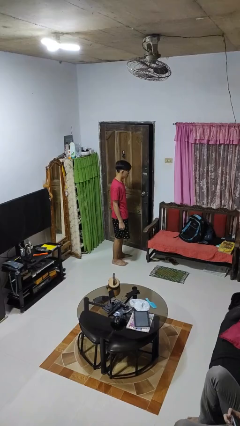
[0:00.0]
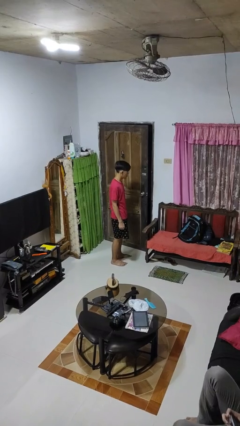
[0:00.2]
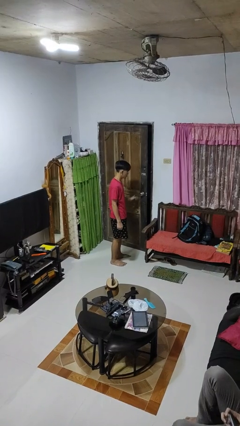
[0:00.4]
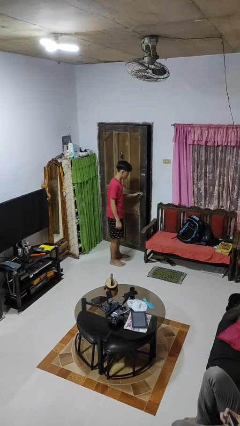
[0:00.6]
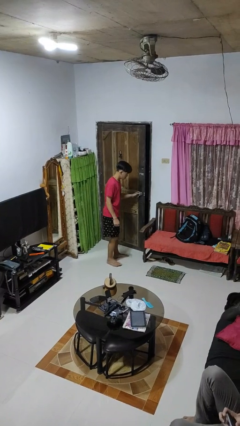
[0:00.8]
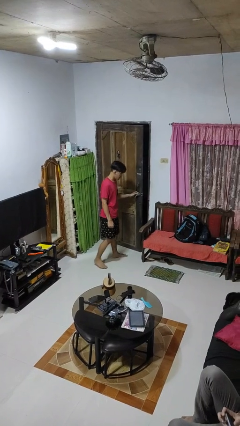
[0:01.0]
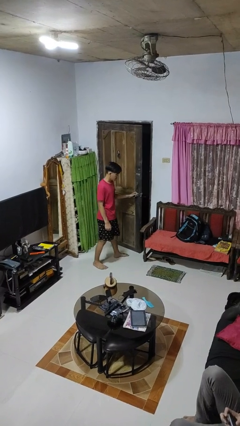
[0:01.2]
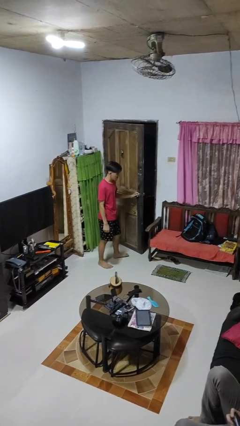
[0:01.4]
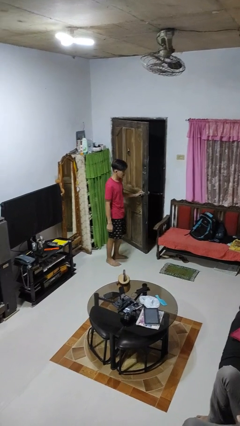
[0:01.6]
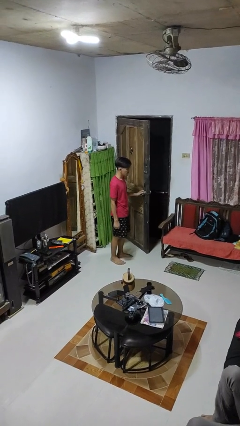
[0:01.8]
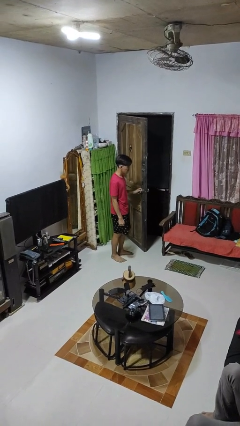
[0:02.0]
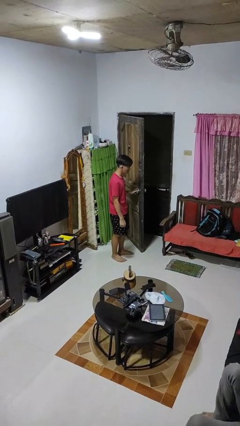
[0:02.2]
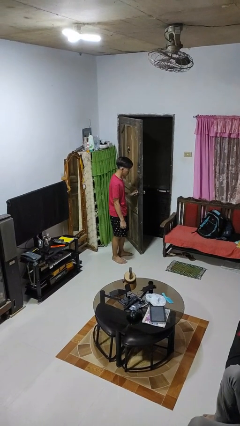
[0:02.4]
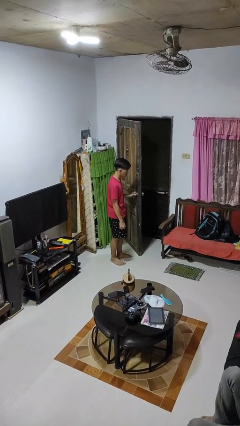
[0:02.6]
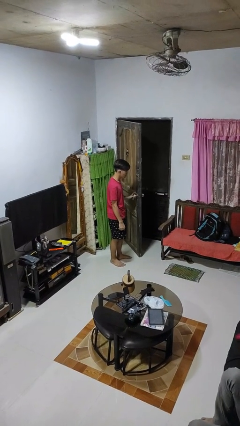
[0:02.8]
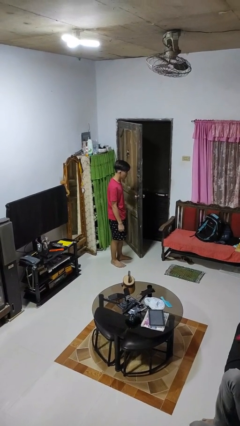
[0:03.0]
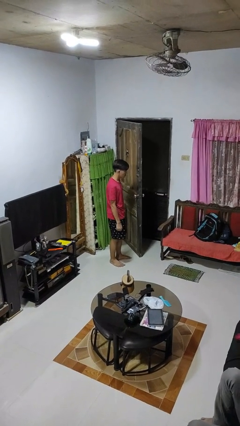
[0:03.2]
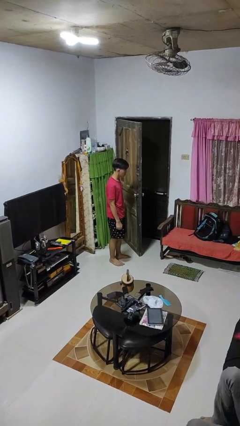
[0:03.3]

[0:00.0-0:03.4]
person opens facility door

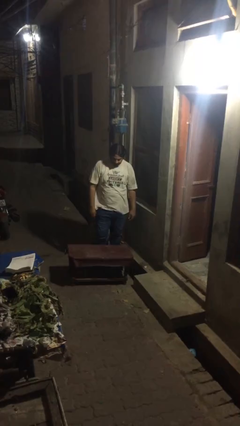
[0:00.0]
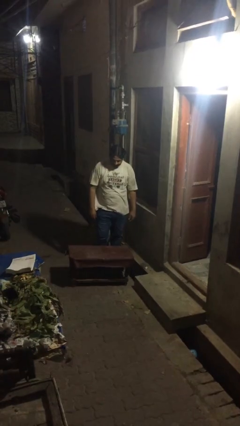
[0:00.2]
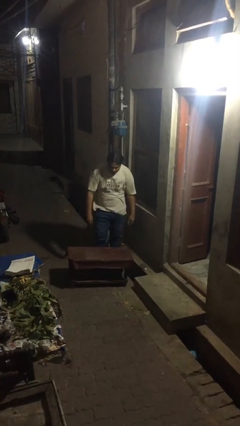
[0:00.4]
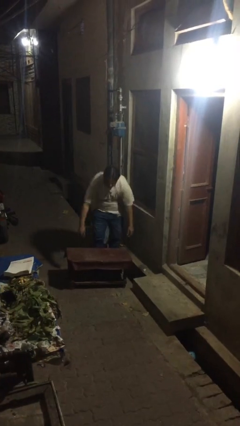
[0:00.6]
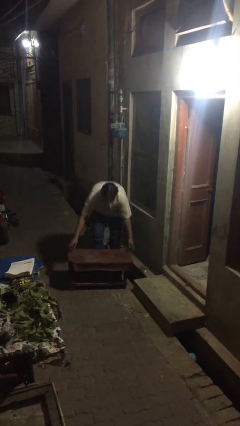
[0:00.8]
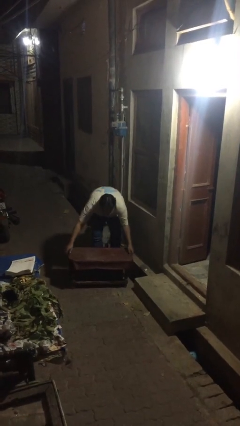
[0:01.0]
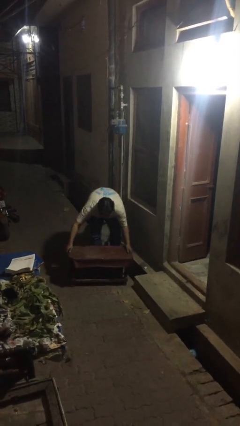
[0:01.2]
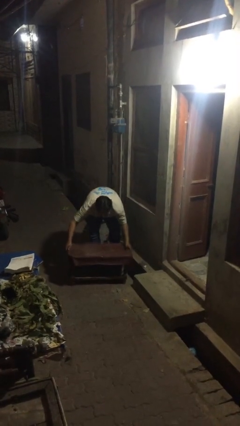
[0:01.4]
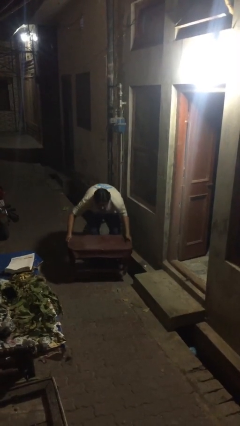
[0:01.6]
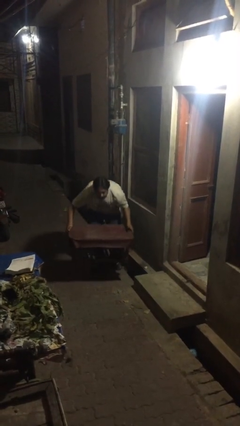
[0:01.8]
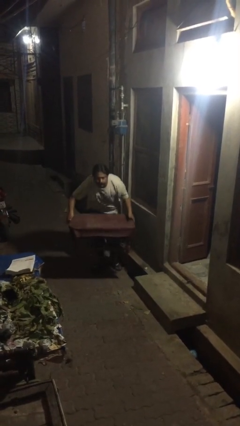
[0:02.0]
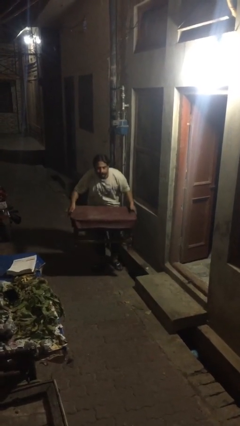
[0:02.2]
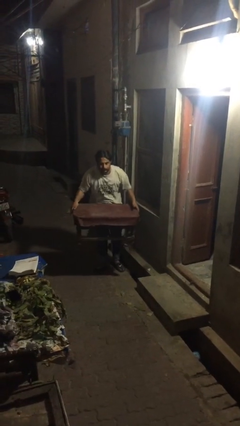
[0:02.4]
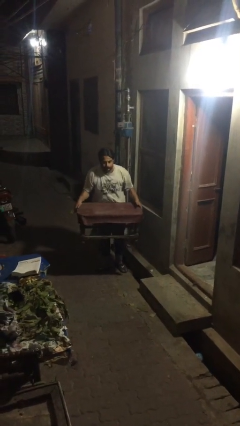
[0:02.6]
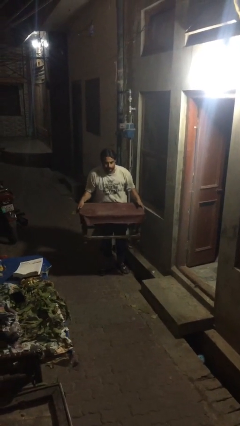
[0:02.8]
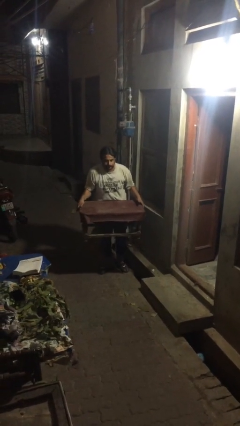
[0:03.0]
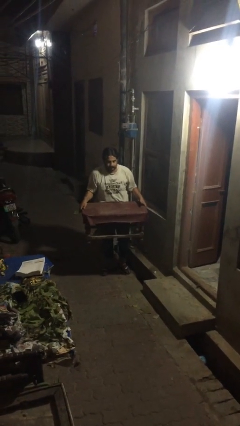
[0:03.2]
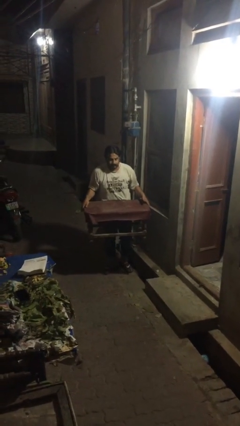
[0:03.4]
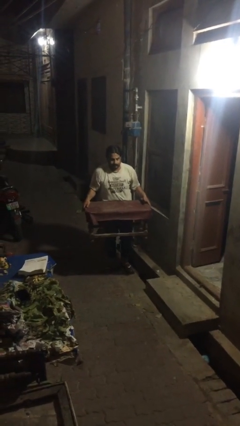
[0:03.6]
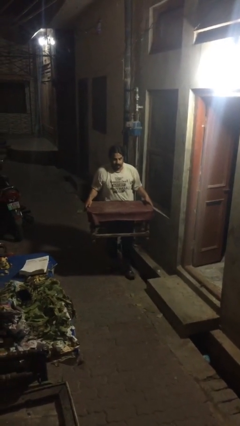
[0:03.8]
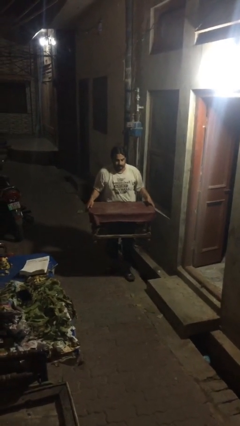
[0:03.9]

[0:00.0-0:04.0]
person picks up object from floor

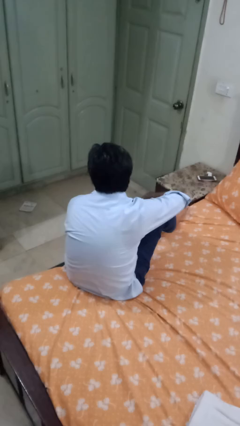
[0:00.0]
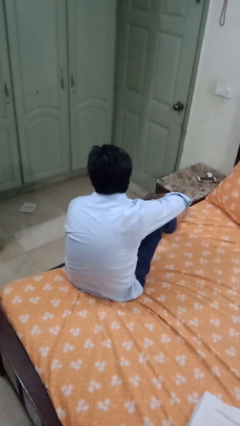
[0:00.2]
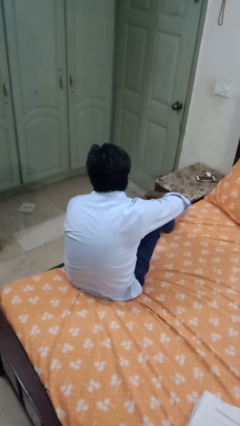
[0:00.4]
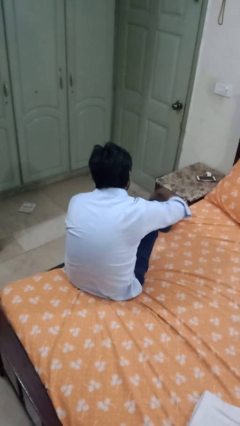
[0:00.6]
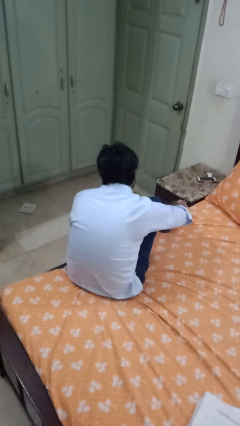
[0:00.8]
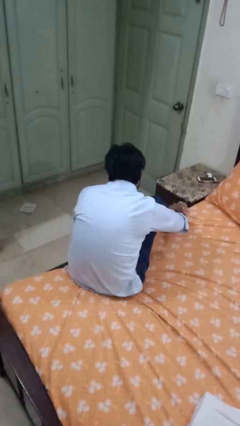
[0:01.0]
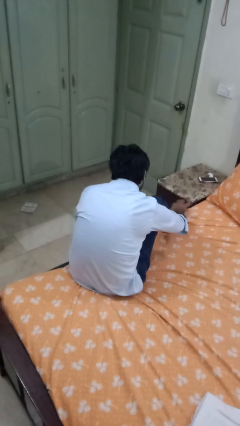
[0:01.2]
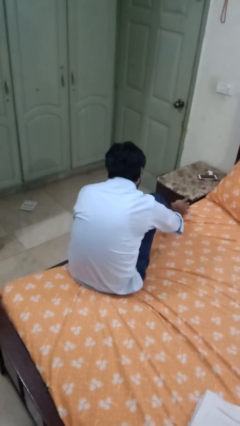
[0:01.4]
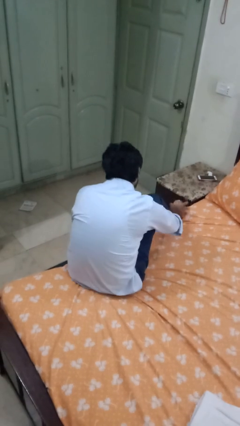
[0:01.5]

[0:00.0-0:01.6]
person rubs foot

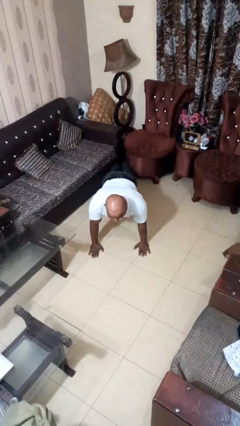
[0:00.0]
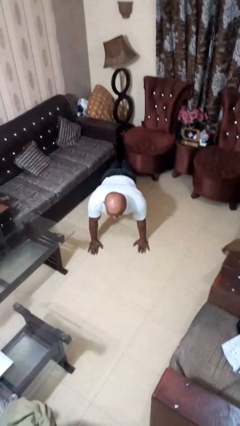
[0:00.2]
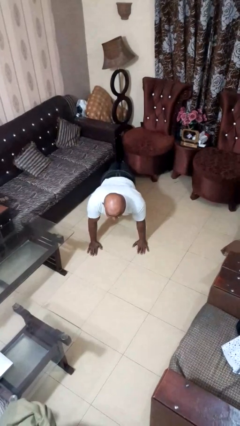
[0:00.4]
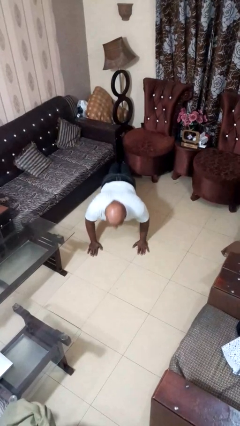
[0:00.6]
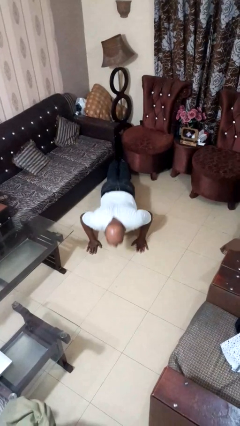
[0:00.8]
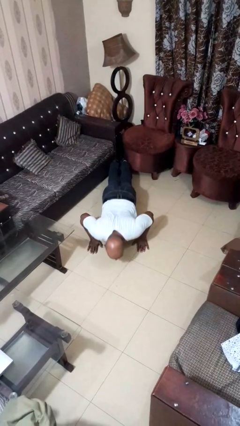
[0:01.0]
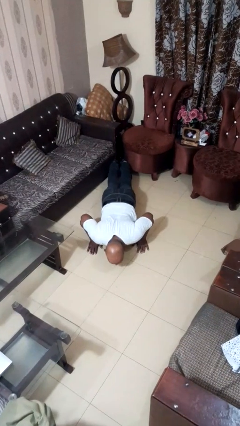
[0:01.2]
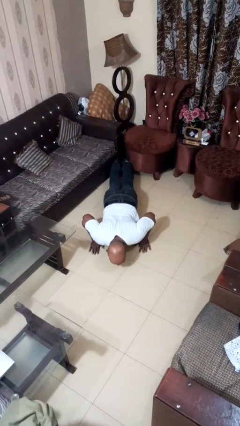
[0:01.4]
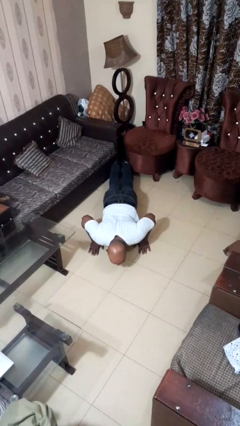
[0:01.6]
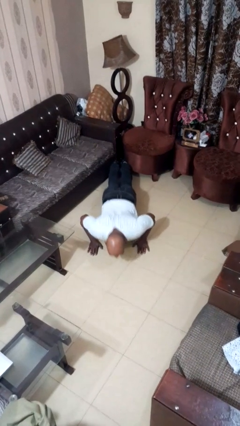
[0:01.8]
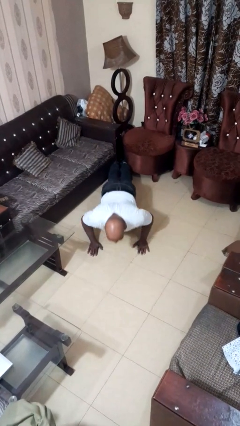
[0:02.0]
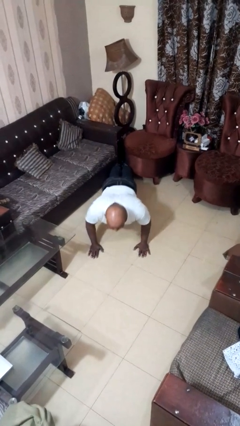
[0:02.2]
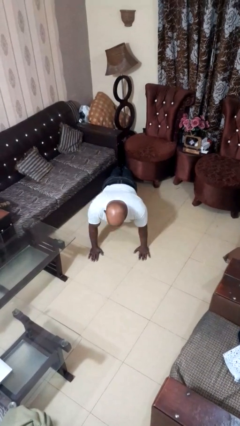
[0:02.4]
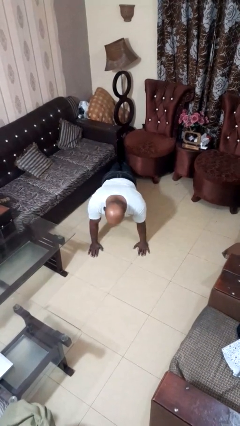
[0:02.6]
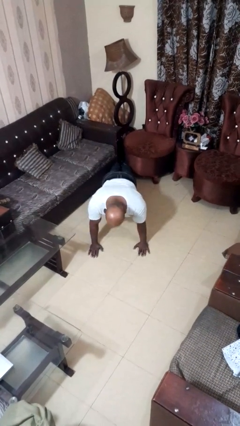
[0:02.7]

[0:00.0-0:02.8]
person exercises with pushup

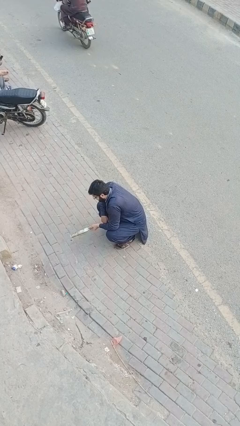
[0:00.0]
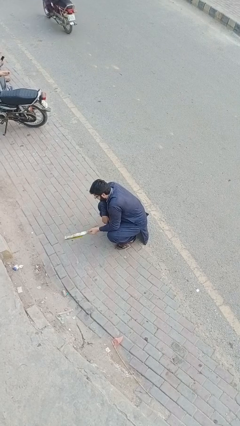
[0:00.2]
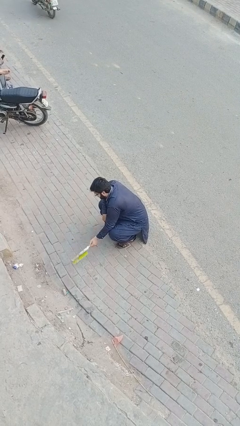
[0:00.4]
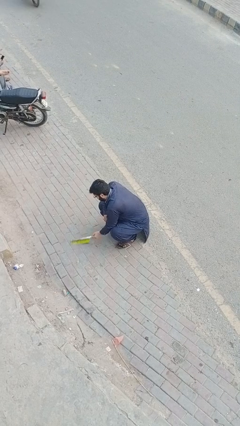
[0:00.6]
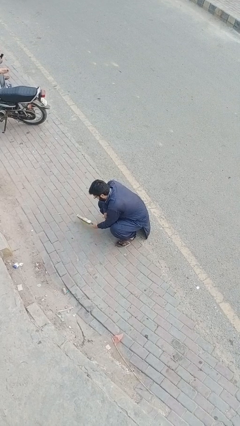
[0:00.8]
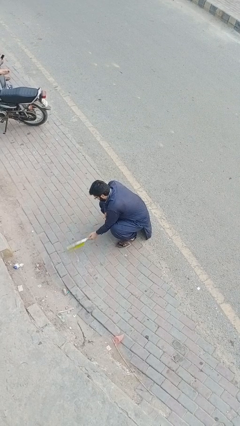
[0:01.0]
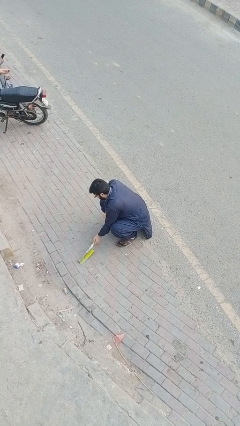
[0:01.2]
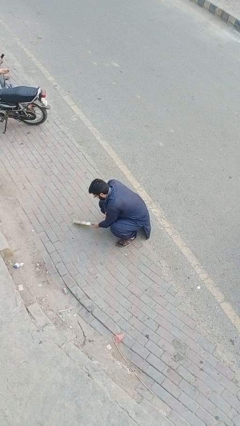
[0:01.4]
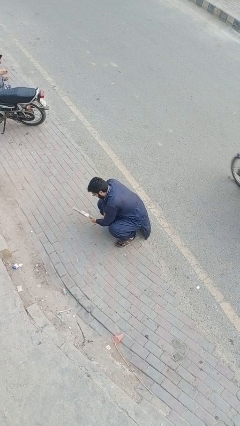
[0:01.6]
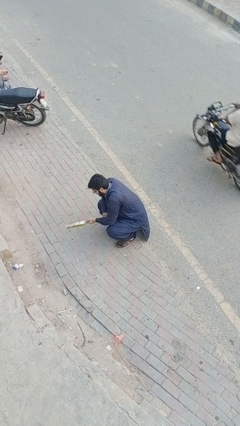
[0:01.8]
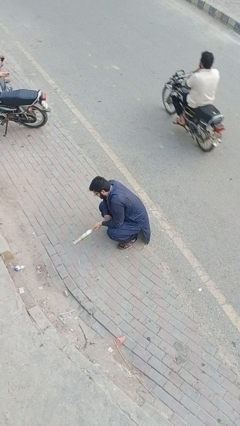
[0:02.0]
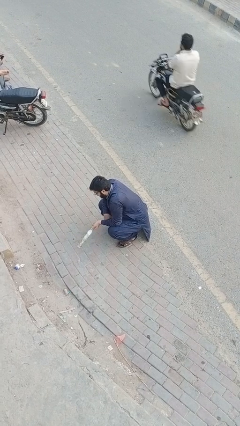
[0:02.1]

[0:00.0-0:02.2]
person sweeps floor

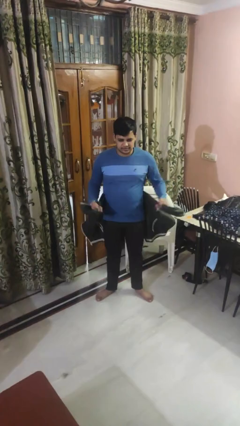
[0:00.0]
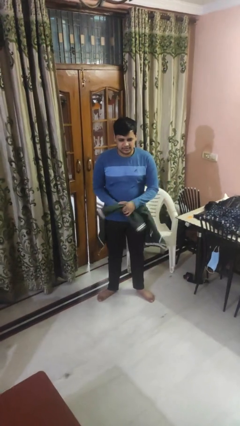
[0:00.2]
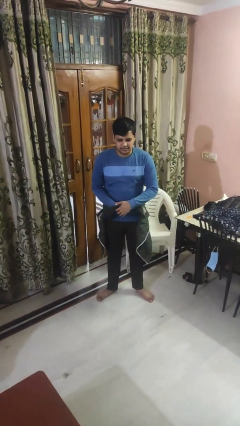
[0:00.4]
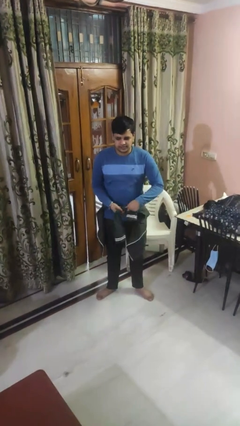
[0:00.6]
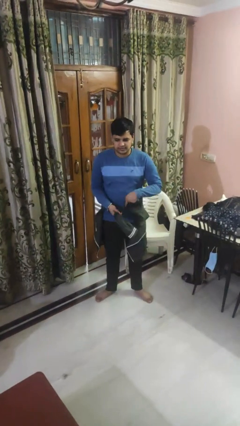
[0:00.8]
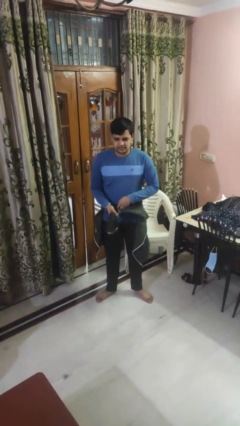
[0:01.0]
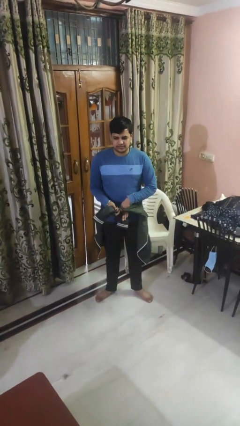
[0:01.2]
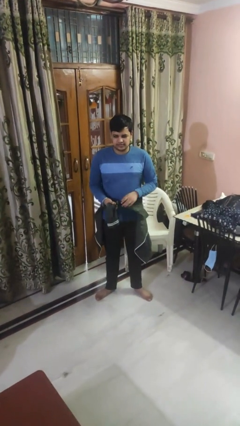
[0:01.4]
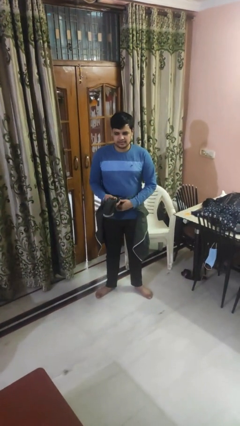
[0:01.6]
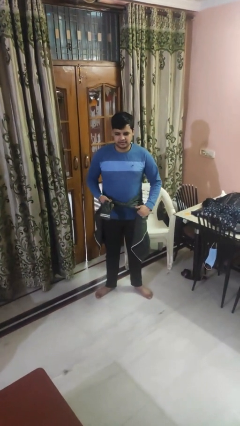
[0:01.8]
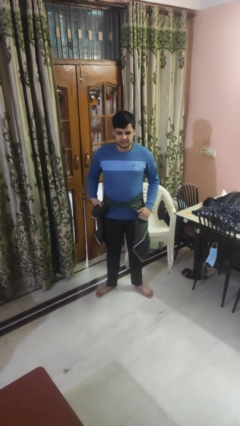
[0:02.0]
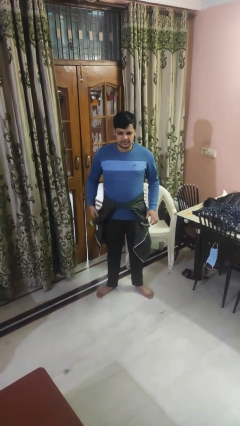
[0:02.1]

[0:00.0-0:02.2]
person ties jacket around waist

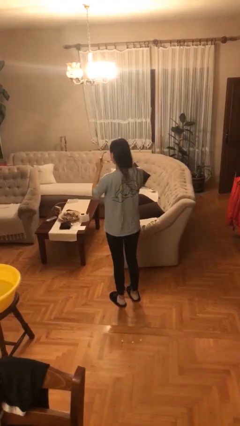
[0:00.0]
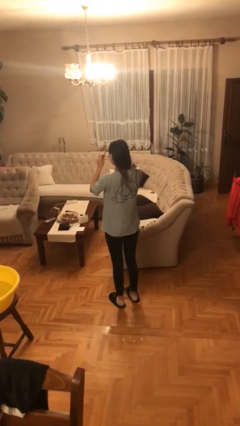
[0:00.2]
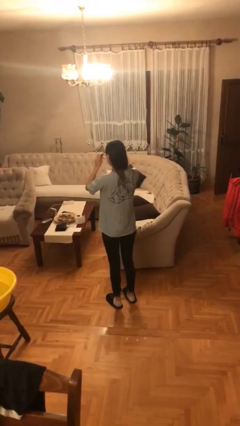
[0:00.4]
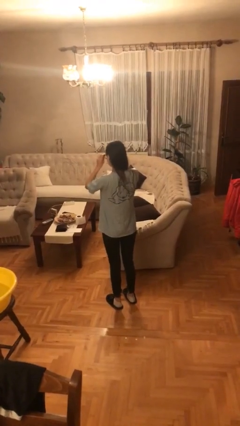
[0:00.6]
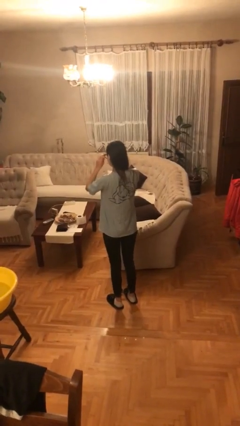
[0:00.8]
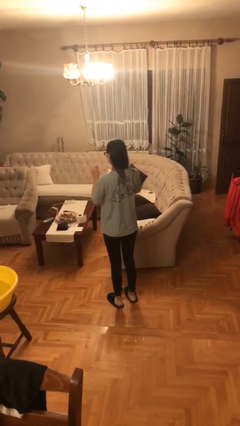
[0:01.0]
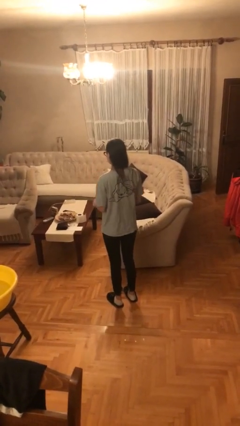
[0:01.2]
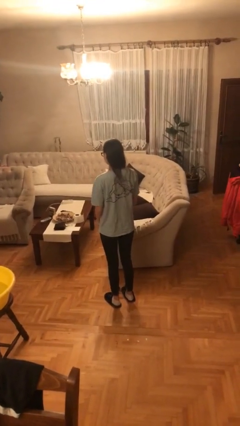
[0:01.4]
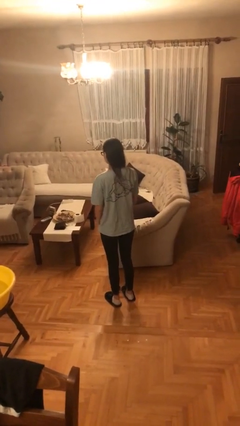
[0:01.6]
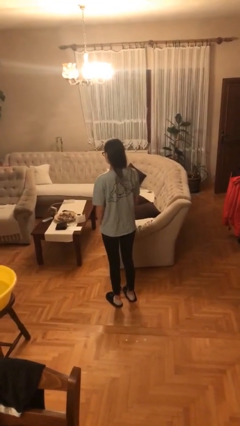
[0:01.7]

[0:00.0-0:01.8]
person puts on glasses
